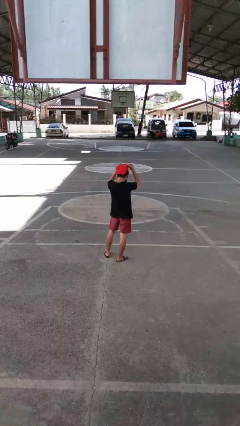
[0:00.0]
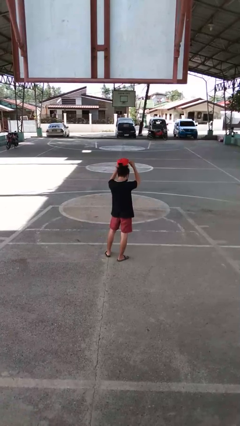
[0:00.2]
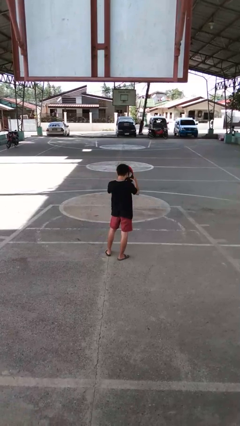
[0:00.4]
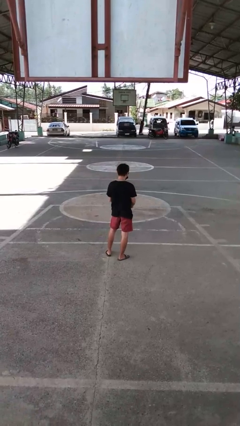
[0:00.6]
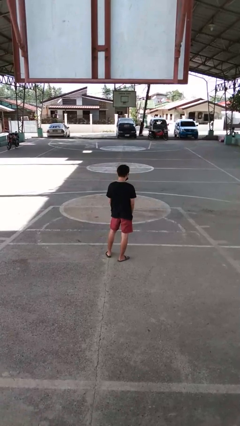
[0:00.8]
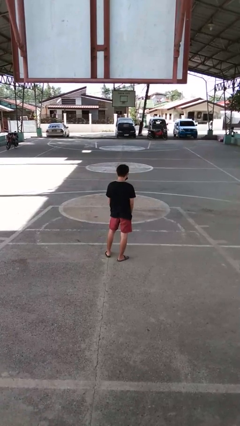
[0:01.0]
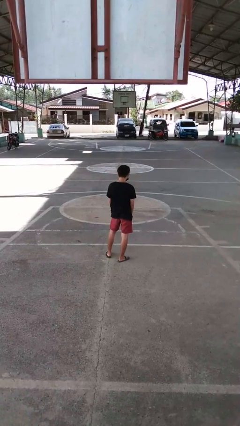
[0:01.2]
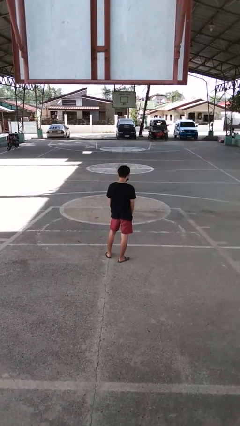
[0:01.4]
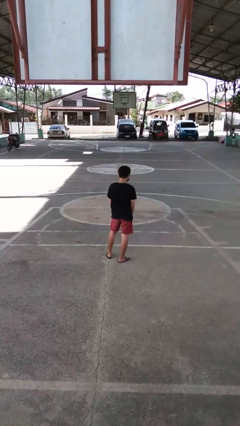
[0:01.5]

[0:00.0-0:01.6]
person takes off hat

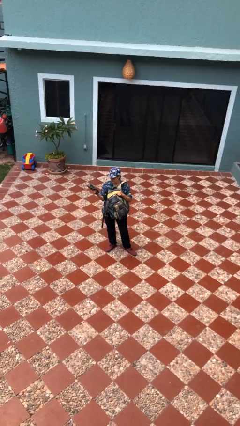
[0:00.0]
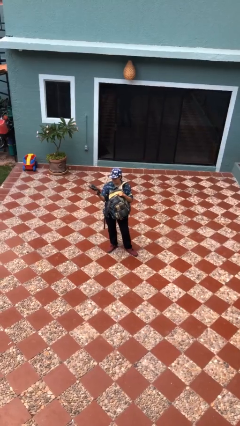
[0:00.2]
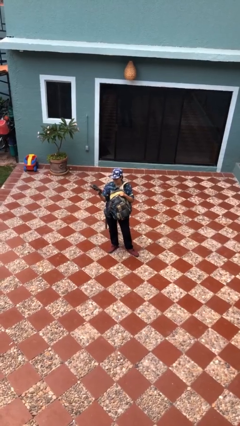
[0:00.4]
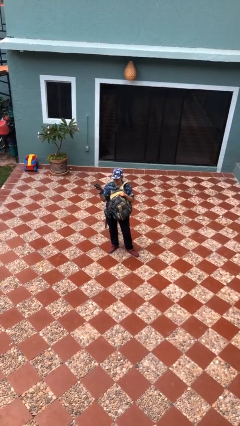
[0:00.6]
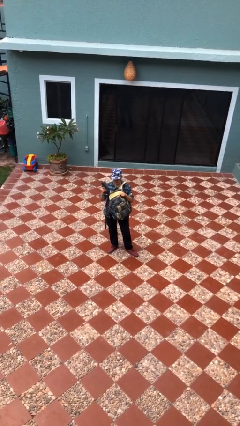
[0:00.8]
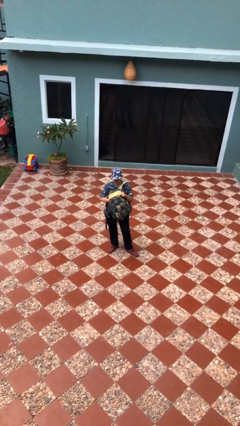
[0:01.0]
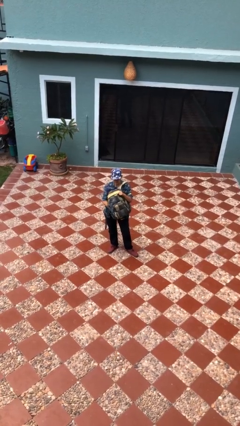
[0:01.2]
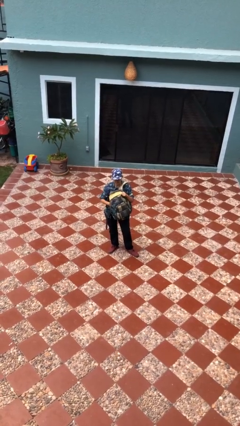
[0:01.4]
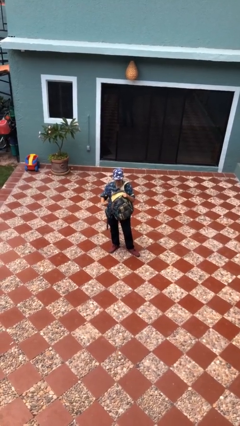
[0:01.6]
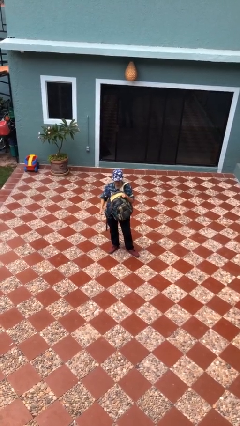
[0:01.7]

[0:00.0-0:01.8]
person puts object into backpack

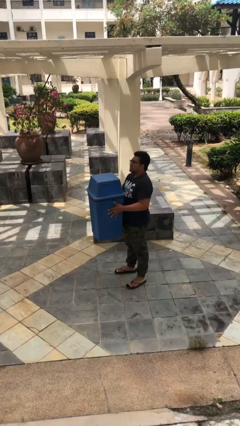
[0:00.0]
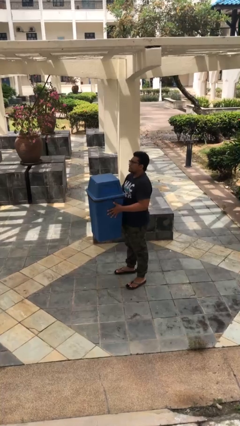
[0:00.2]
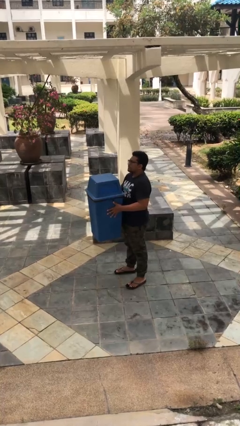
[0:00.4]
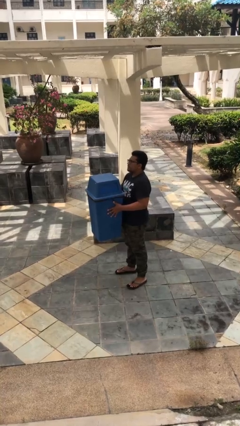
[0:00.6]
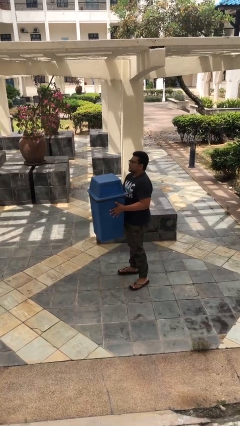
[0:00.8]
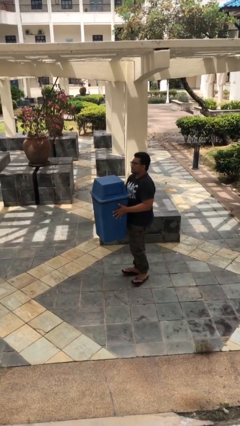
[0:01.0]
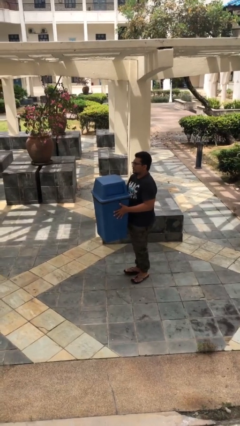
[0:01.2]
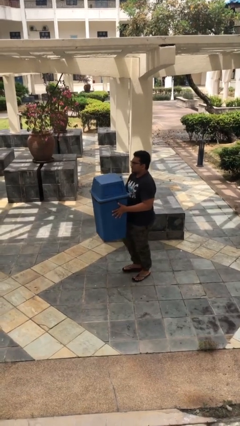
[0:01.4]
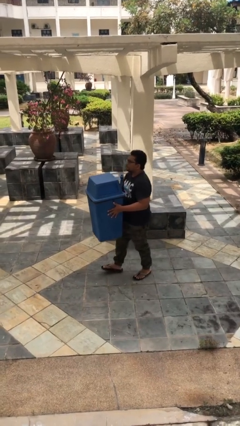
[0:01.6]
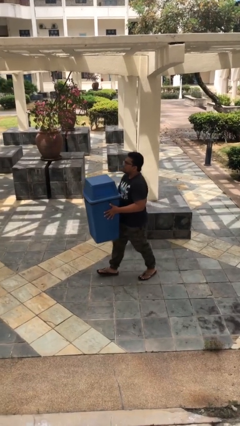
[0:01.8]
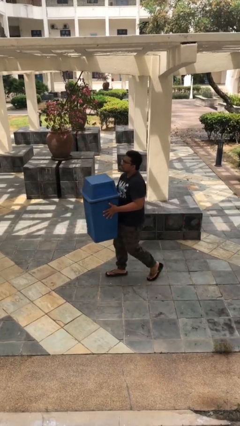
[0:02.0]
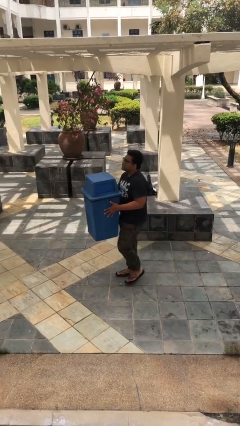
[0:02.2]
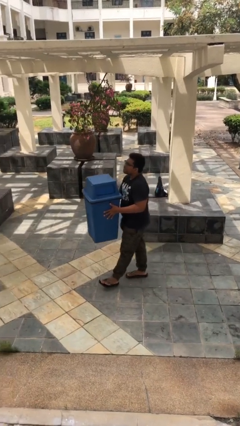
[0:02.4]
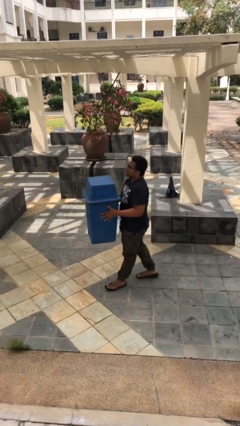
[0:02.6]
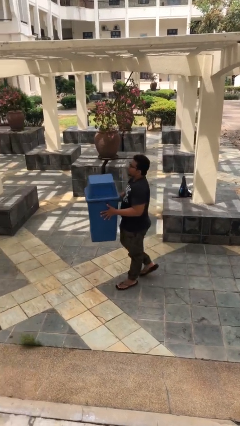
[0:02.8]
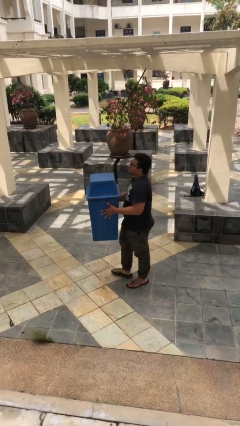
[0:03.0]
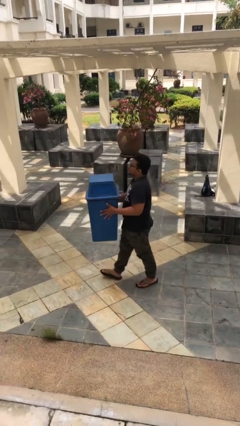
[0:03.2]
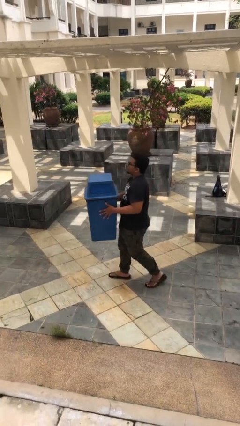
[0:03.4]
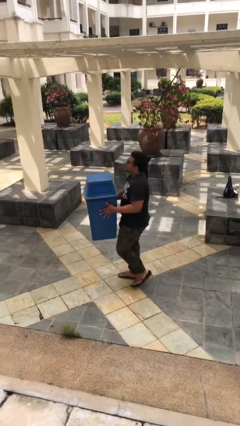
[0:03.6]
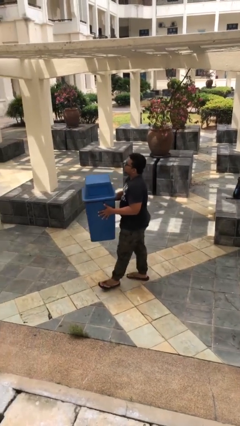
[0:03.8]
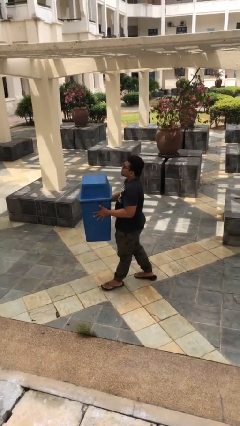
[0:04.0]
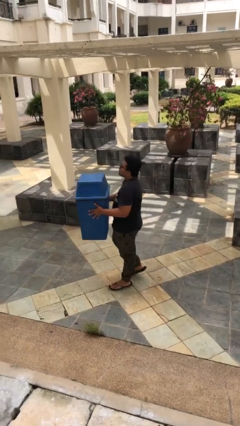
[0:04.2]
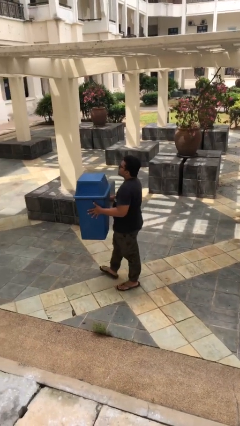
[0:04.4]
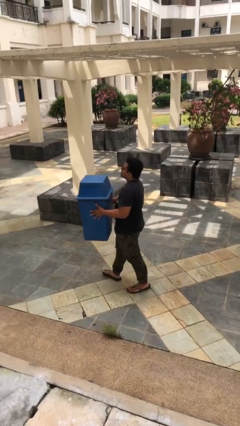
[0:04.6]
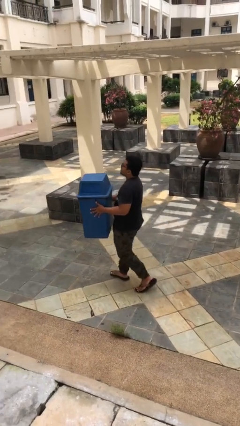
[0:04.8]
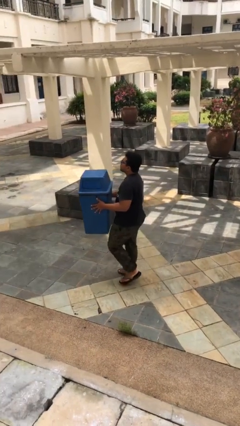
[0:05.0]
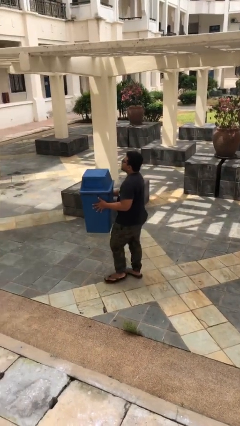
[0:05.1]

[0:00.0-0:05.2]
person carries heavy object

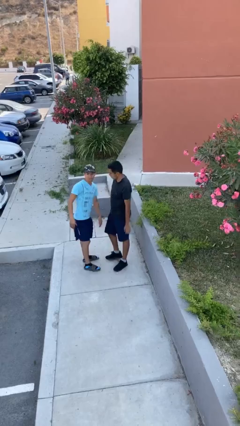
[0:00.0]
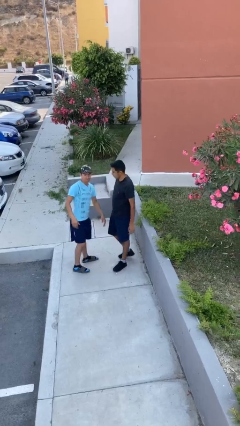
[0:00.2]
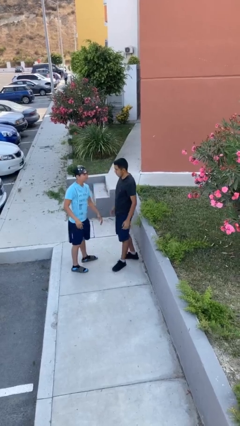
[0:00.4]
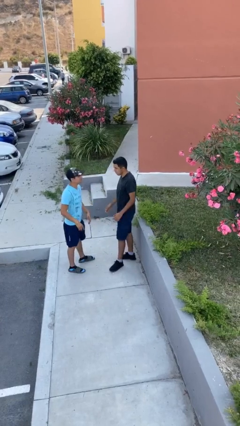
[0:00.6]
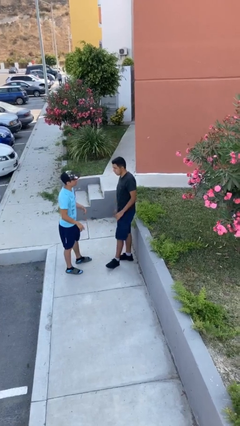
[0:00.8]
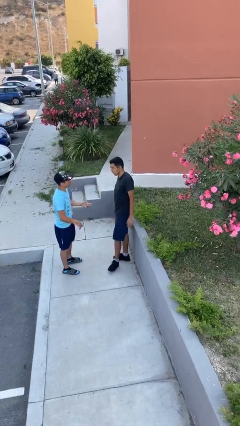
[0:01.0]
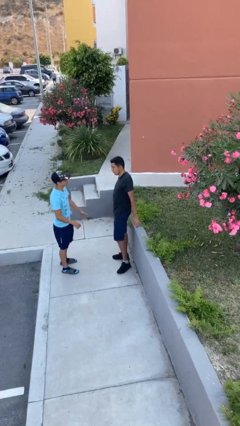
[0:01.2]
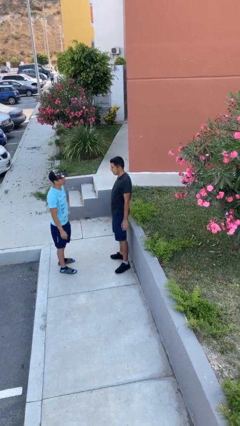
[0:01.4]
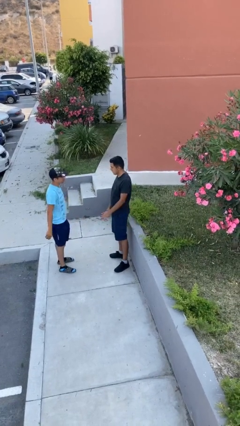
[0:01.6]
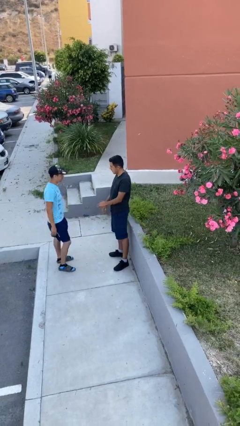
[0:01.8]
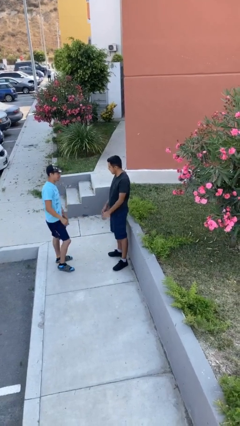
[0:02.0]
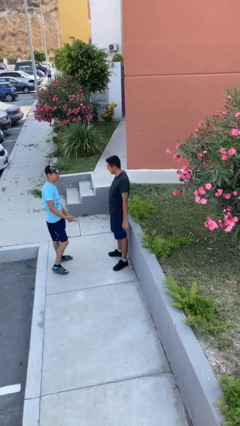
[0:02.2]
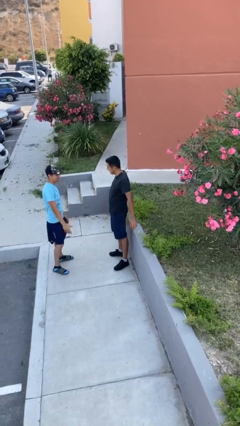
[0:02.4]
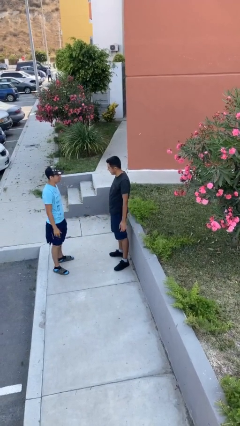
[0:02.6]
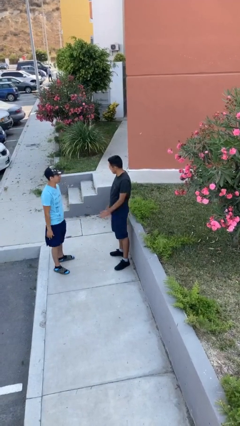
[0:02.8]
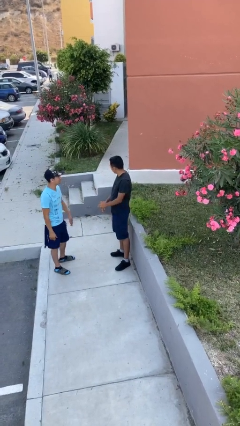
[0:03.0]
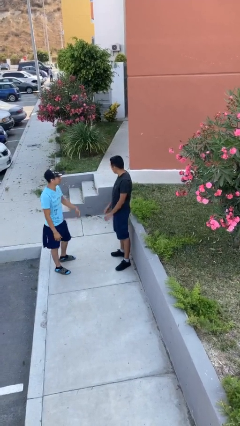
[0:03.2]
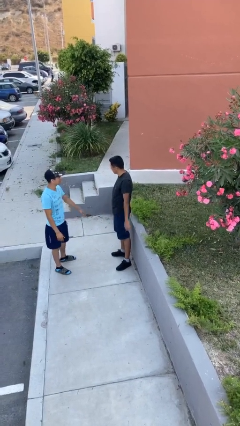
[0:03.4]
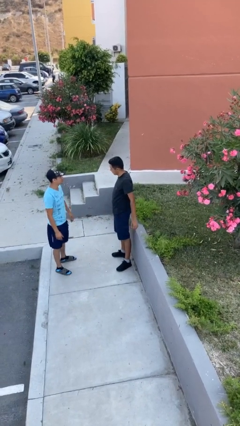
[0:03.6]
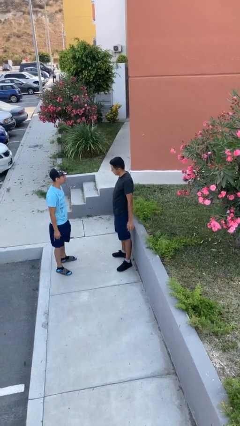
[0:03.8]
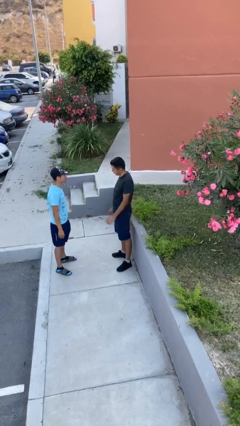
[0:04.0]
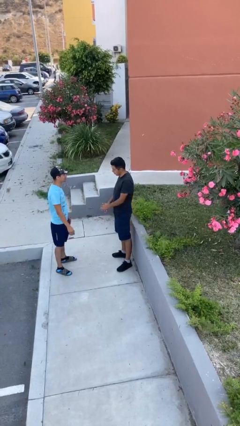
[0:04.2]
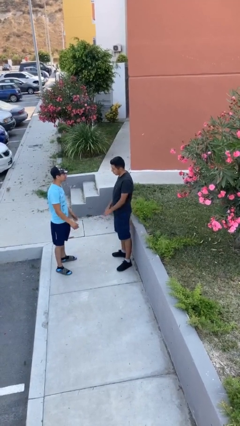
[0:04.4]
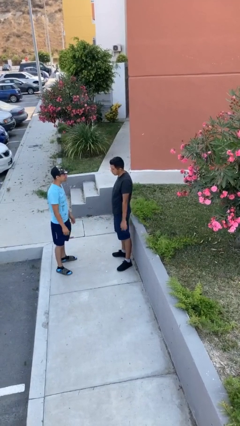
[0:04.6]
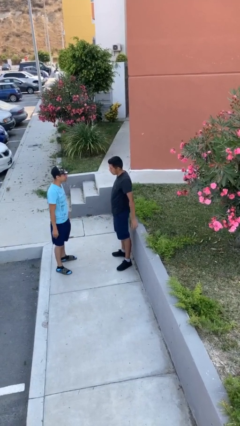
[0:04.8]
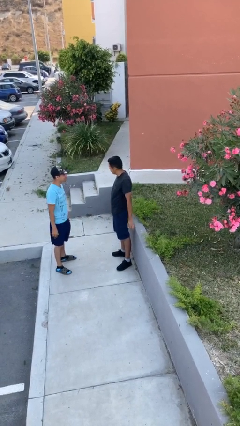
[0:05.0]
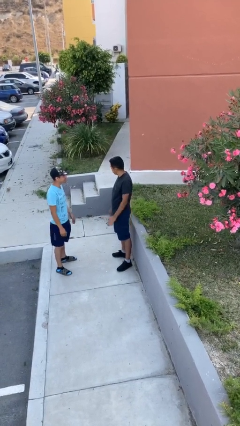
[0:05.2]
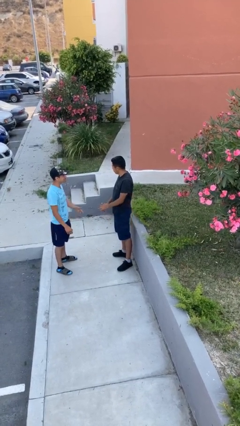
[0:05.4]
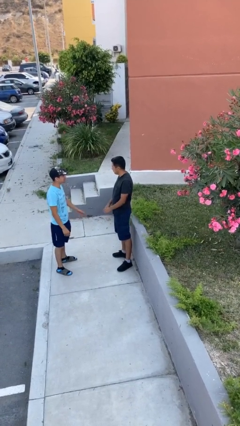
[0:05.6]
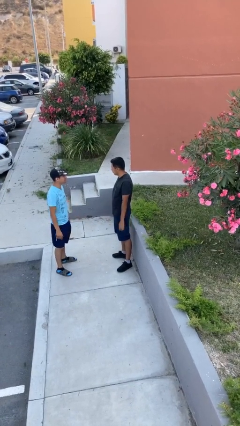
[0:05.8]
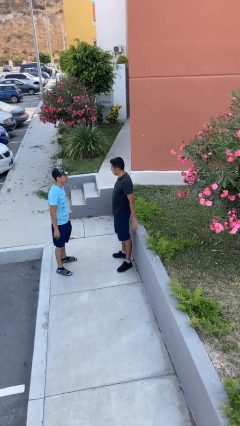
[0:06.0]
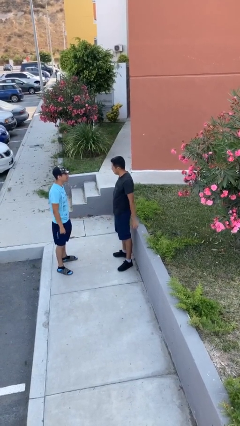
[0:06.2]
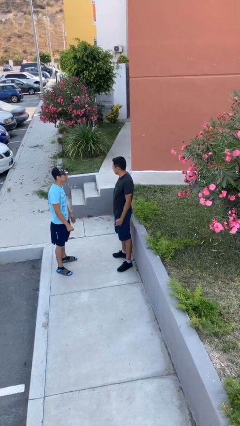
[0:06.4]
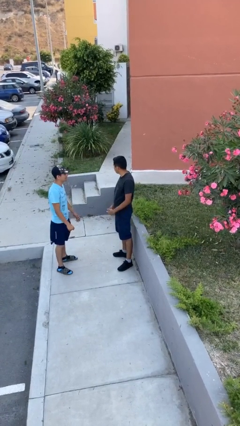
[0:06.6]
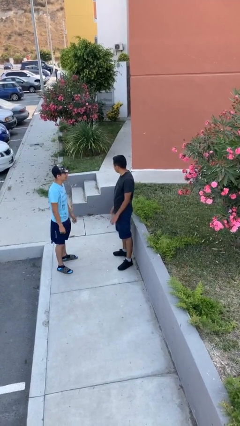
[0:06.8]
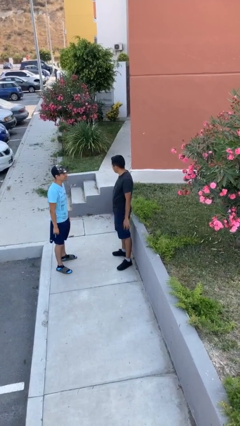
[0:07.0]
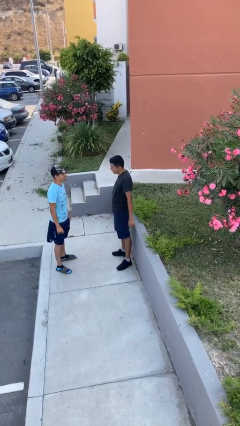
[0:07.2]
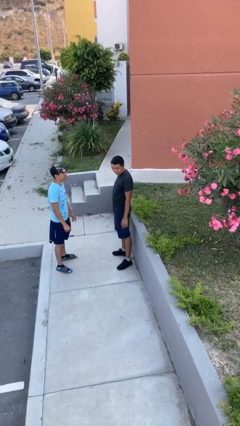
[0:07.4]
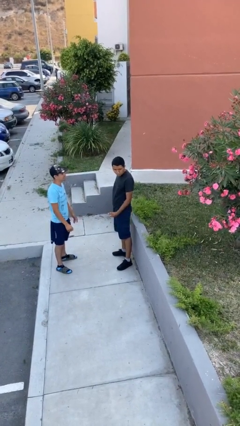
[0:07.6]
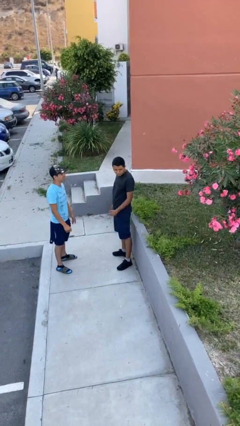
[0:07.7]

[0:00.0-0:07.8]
person talks to person

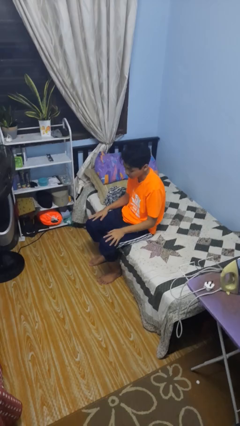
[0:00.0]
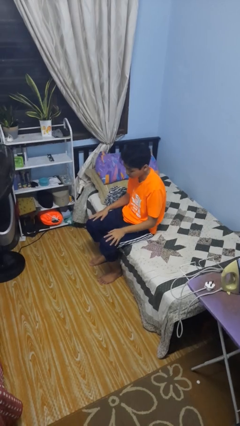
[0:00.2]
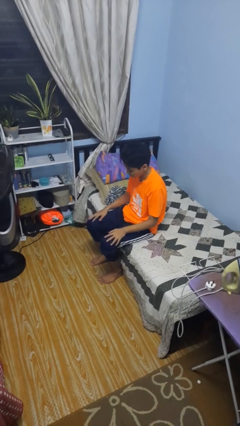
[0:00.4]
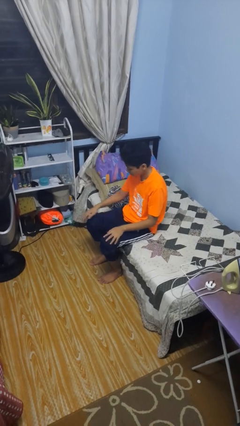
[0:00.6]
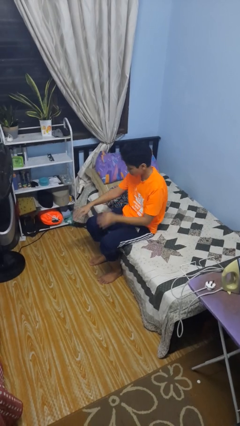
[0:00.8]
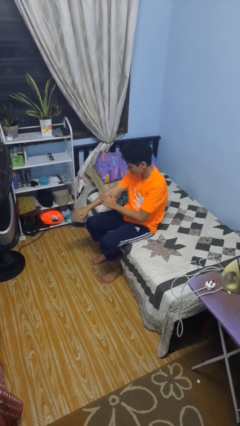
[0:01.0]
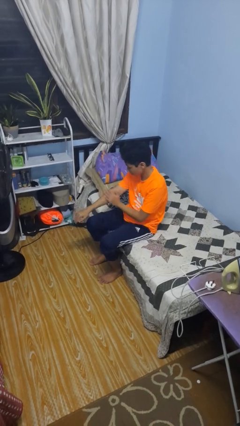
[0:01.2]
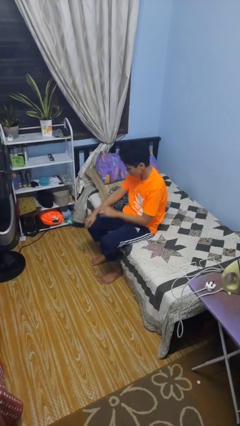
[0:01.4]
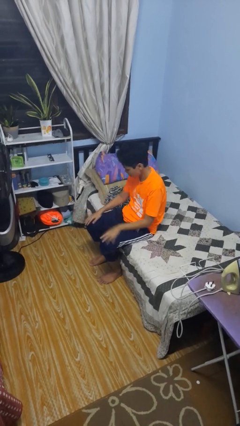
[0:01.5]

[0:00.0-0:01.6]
person swats bug
